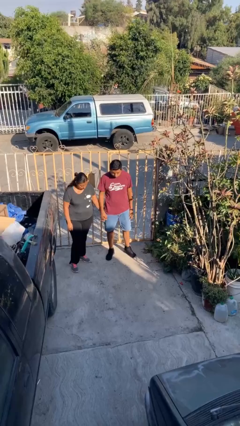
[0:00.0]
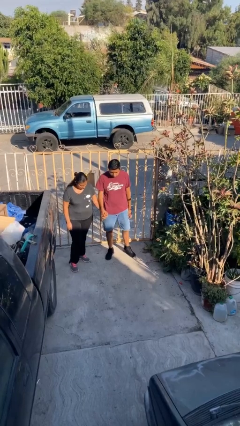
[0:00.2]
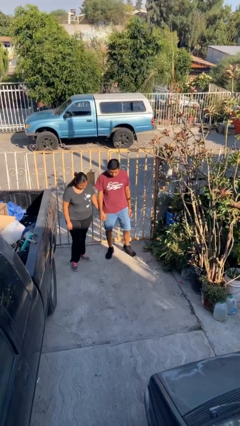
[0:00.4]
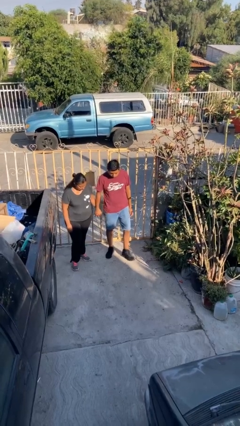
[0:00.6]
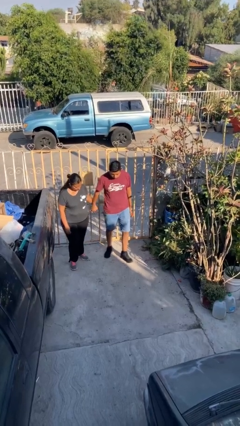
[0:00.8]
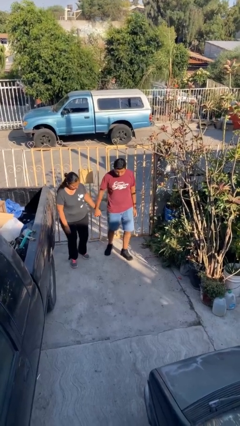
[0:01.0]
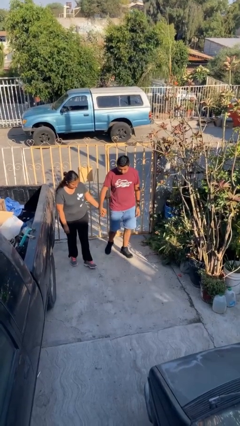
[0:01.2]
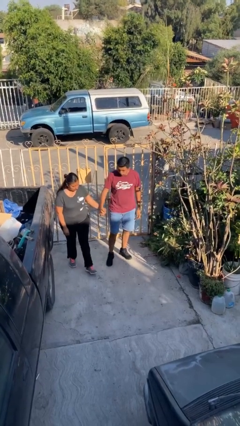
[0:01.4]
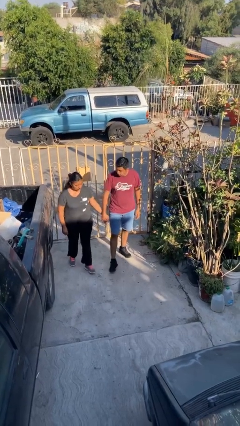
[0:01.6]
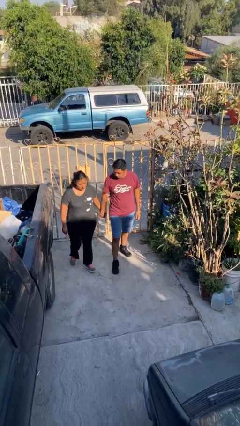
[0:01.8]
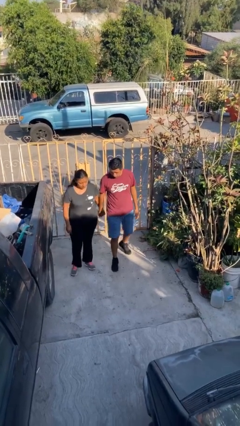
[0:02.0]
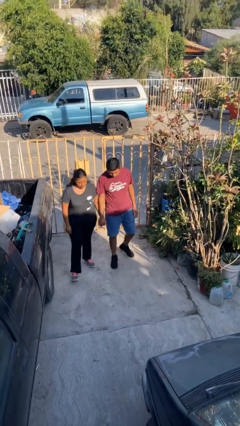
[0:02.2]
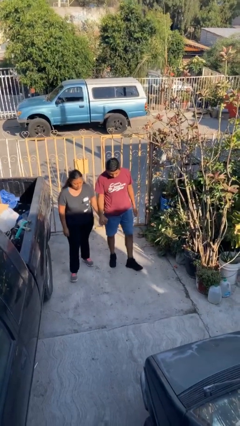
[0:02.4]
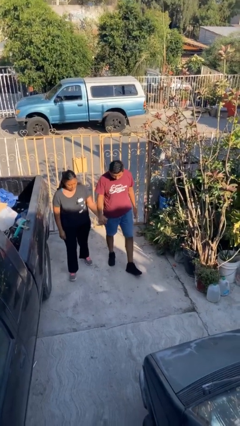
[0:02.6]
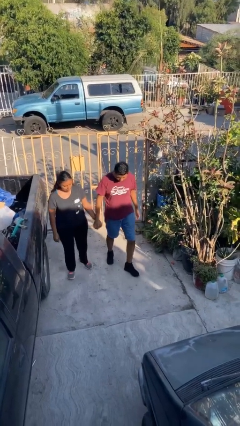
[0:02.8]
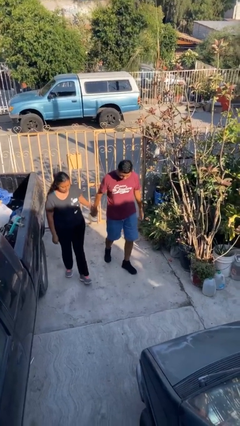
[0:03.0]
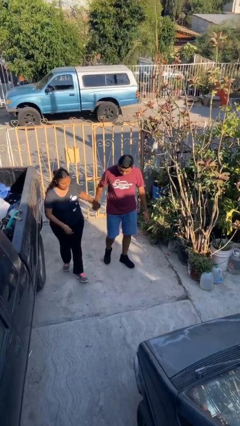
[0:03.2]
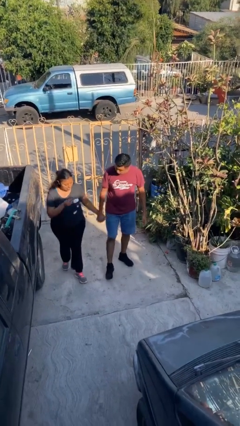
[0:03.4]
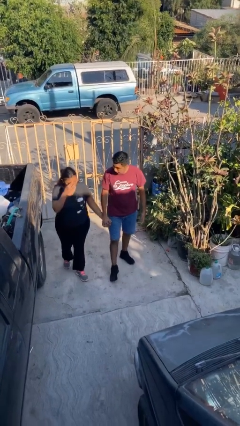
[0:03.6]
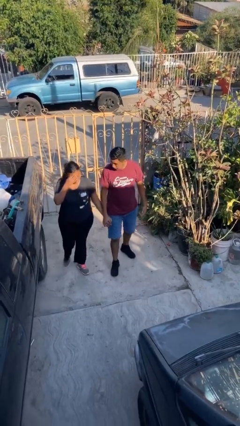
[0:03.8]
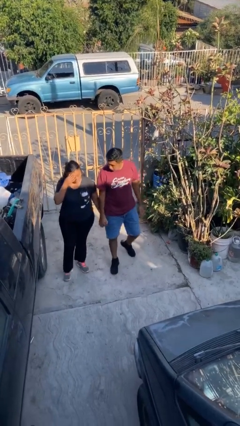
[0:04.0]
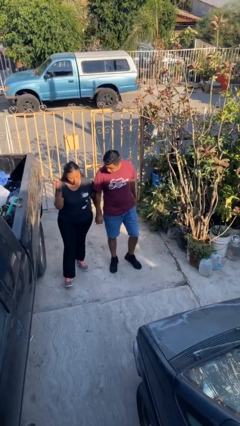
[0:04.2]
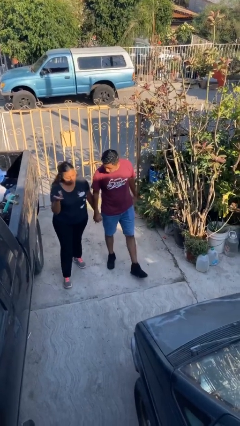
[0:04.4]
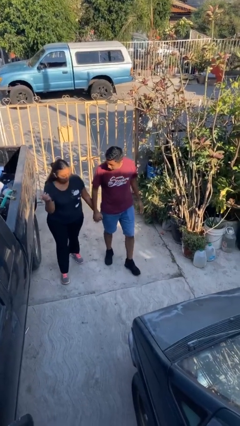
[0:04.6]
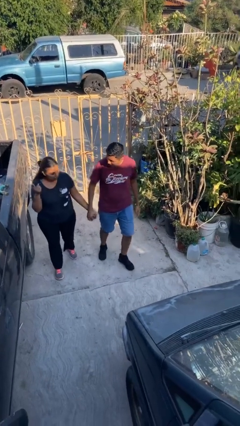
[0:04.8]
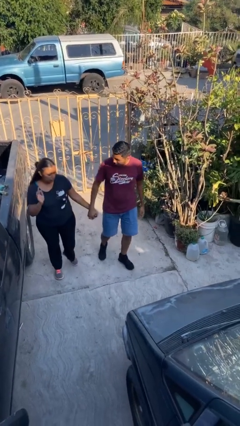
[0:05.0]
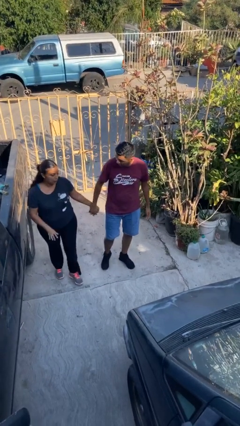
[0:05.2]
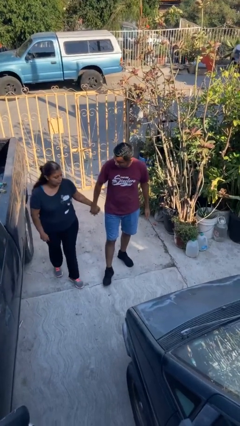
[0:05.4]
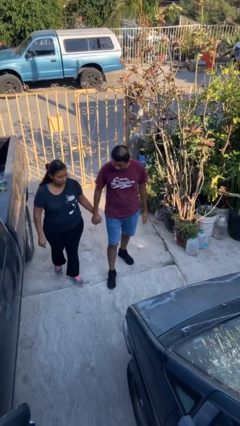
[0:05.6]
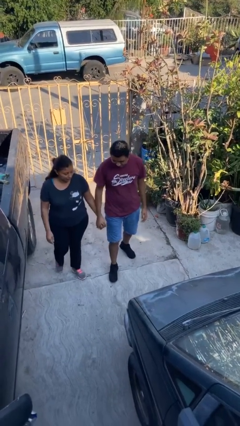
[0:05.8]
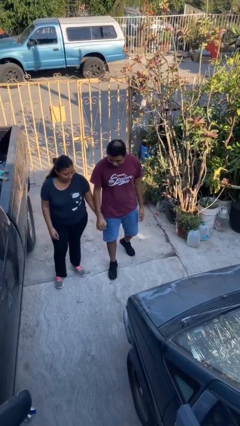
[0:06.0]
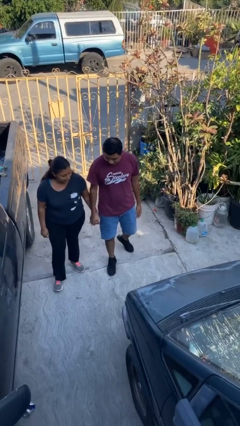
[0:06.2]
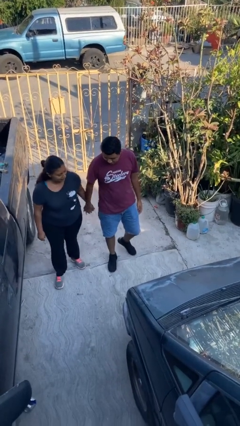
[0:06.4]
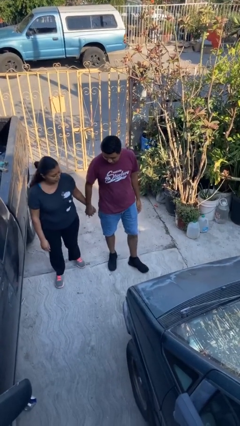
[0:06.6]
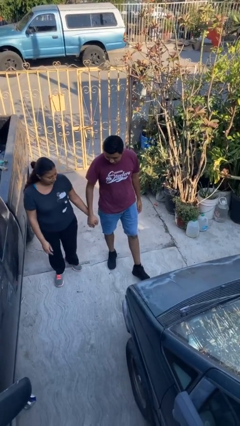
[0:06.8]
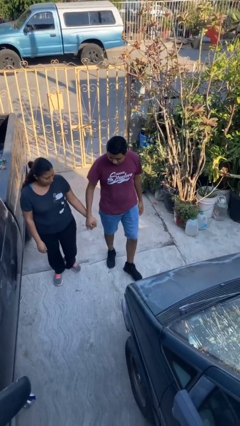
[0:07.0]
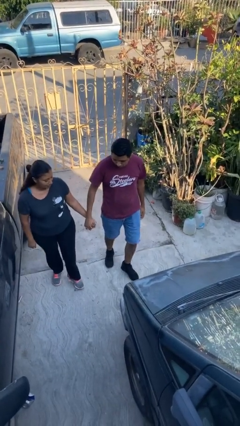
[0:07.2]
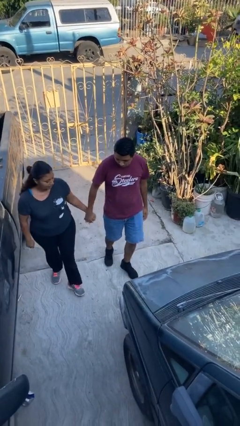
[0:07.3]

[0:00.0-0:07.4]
person holds hand

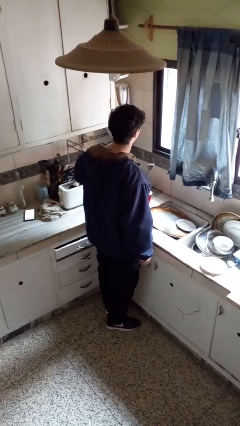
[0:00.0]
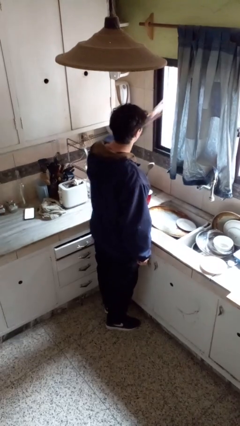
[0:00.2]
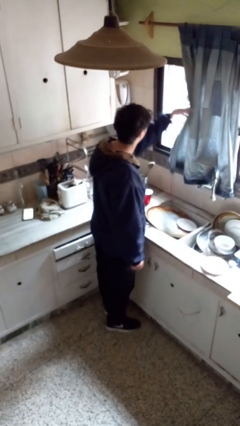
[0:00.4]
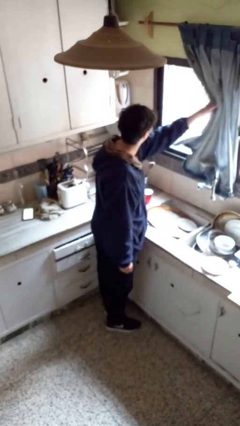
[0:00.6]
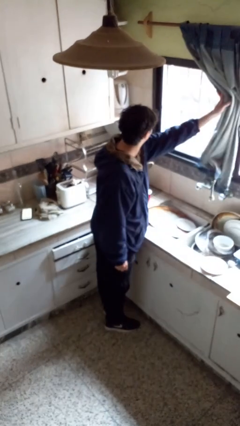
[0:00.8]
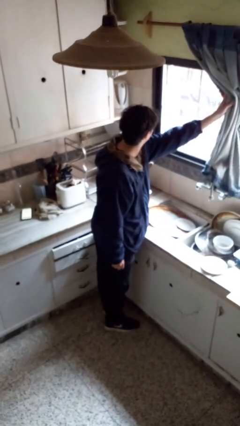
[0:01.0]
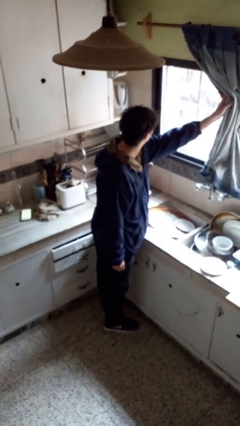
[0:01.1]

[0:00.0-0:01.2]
person opens curtains

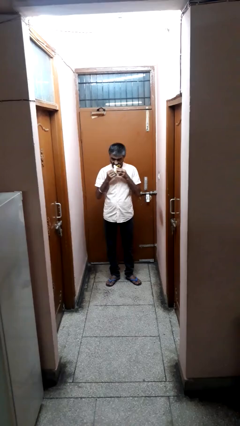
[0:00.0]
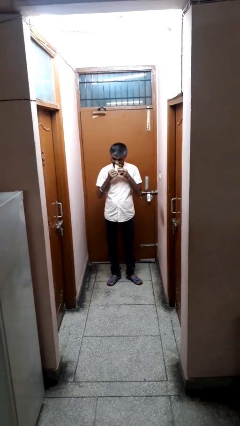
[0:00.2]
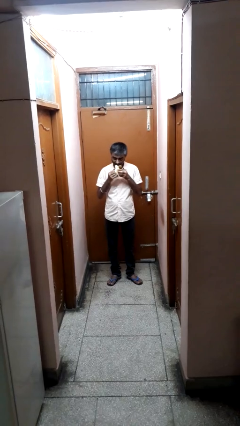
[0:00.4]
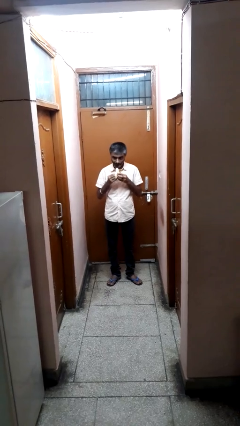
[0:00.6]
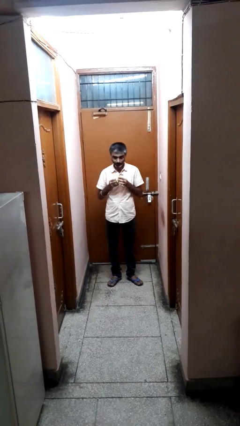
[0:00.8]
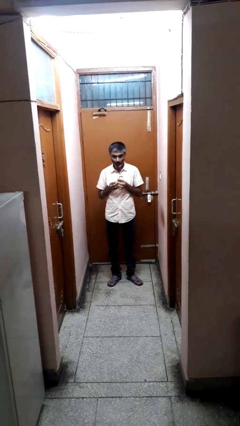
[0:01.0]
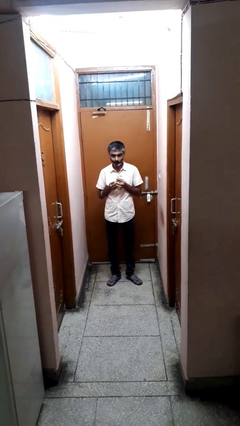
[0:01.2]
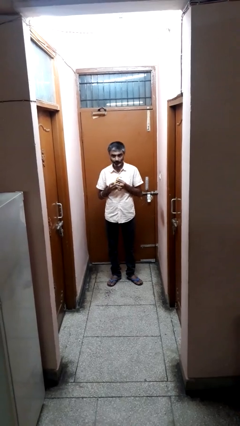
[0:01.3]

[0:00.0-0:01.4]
person eats banana

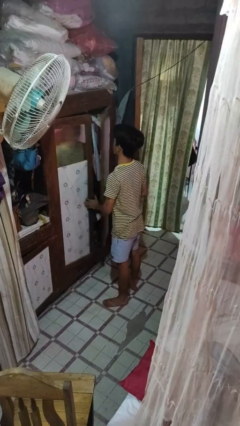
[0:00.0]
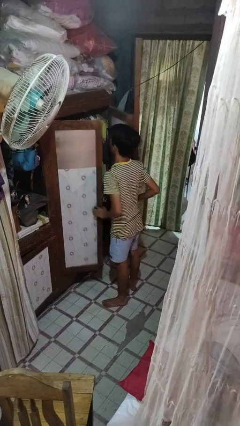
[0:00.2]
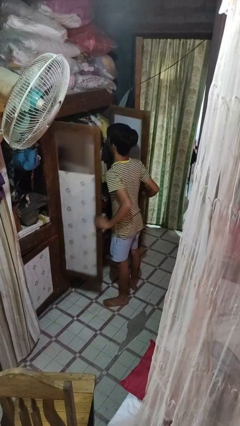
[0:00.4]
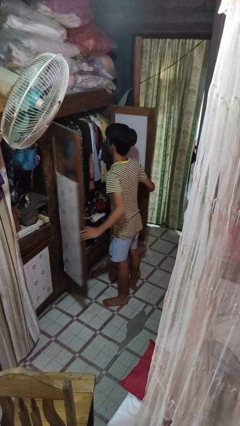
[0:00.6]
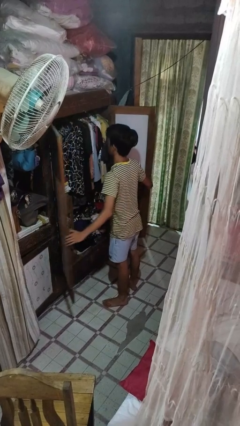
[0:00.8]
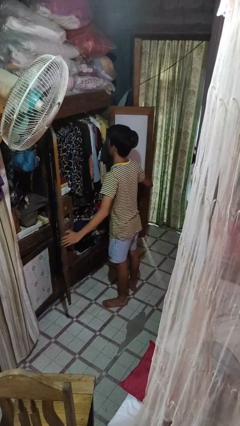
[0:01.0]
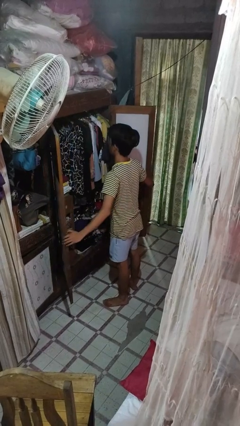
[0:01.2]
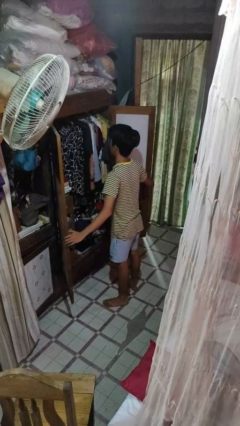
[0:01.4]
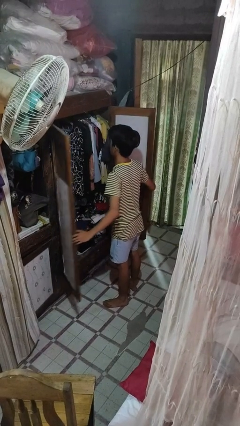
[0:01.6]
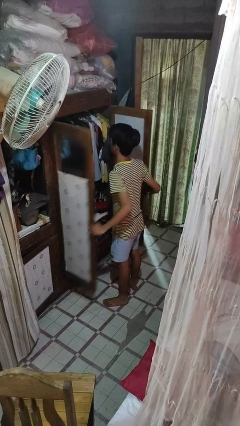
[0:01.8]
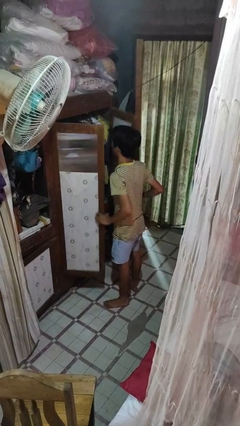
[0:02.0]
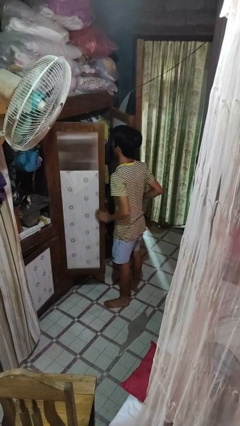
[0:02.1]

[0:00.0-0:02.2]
person opens closet door

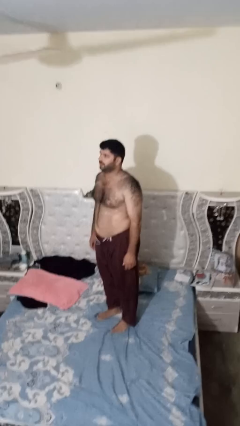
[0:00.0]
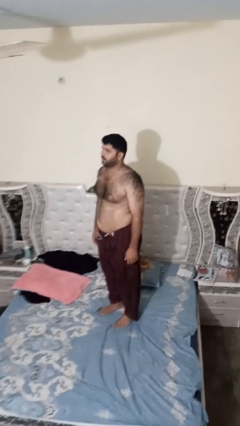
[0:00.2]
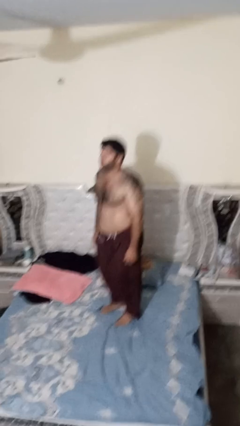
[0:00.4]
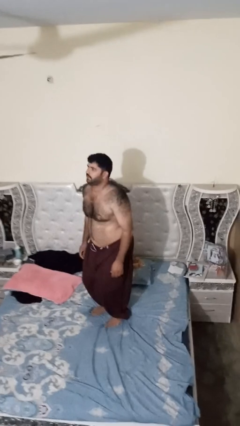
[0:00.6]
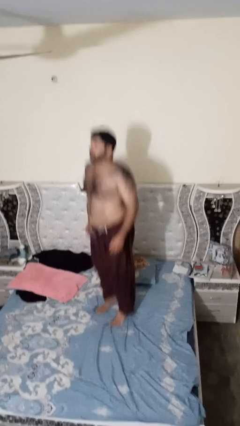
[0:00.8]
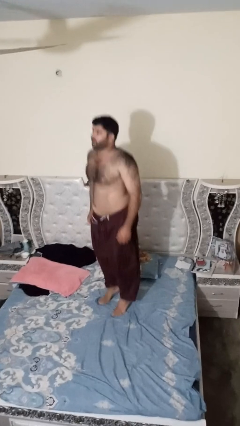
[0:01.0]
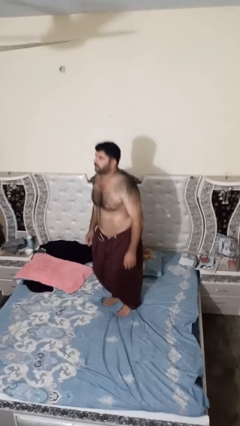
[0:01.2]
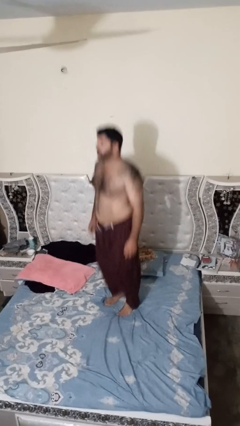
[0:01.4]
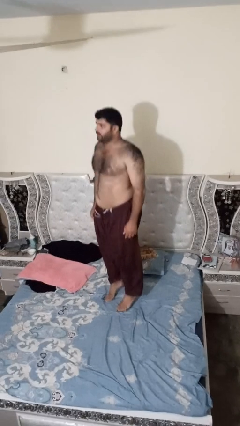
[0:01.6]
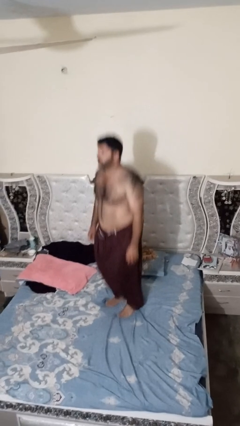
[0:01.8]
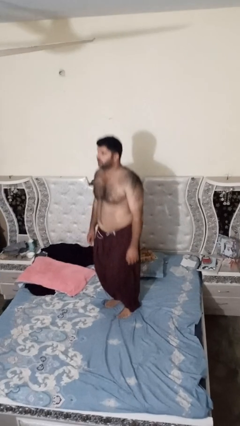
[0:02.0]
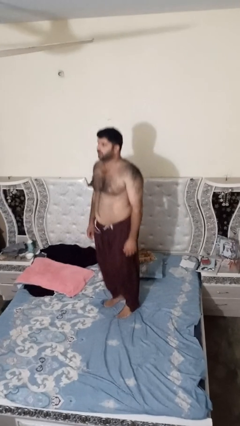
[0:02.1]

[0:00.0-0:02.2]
person jumps on bed

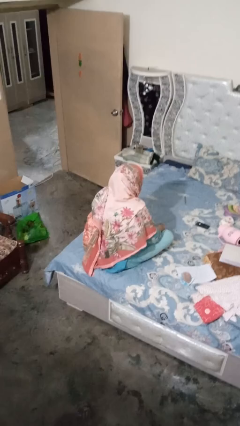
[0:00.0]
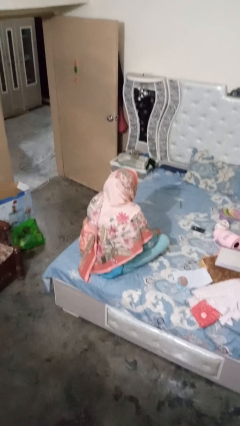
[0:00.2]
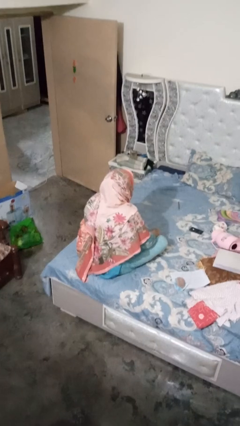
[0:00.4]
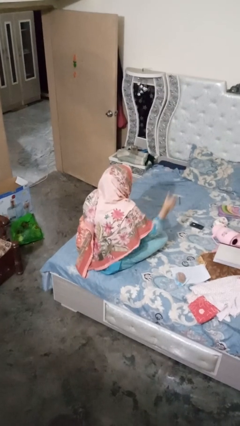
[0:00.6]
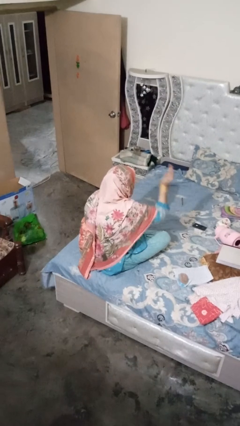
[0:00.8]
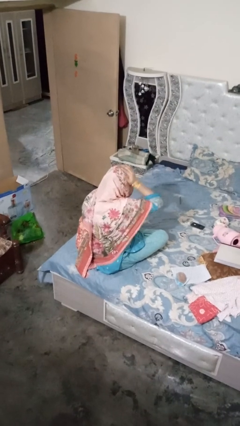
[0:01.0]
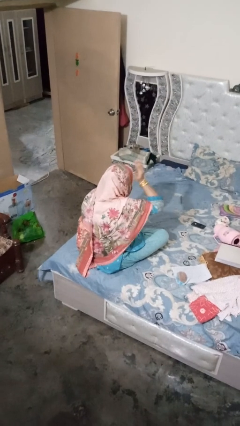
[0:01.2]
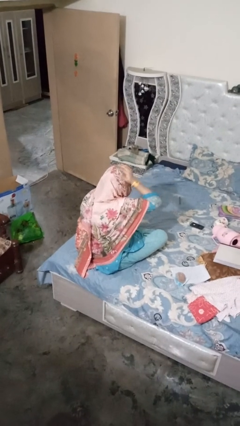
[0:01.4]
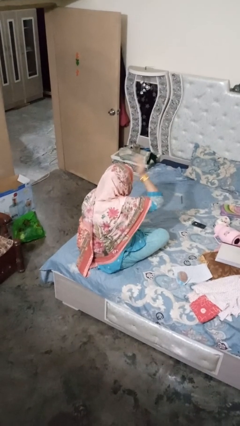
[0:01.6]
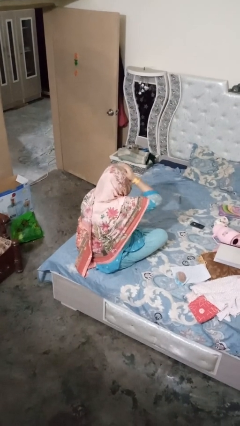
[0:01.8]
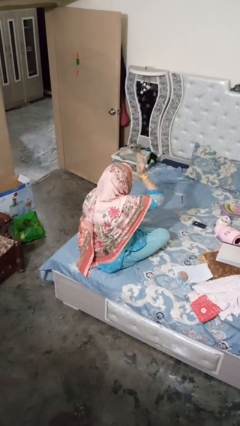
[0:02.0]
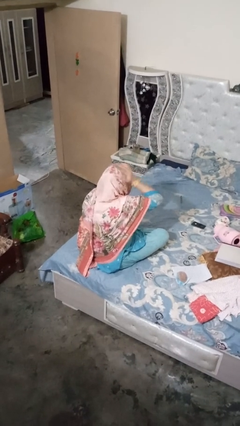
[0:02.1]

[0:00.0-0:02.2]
person pats head

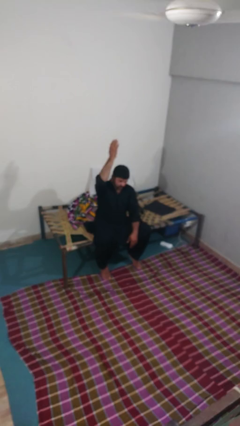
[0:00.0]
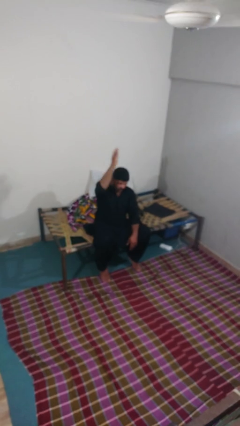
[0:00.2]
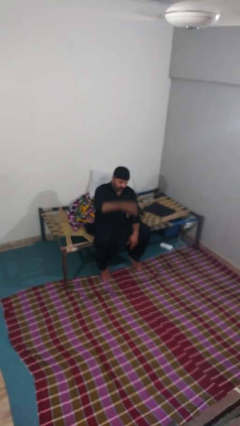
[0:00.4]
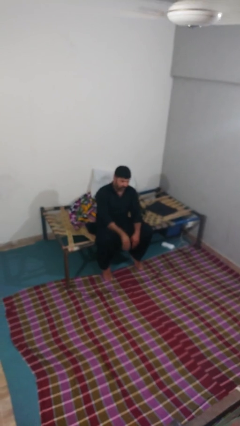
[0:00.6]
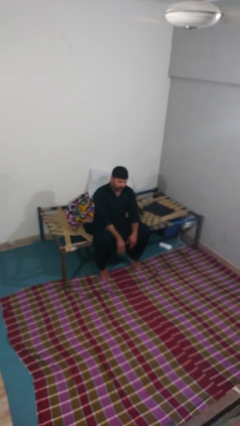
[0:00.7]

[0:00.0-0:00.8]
person gestures swipe down
